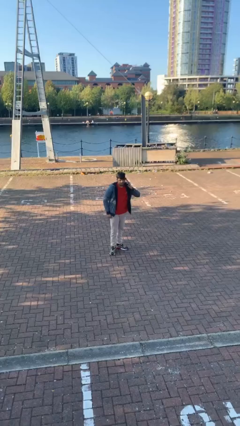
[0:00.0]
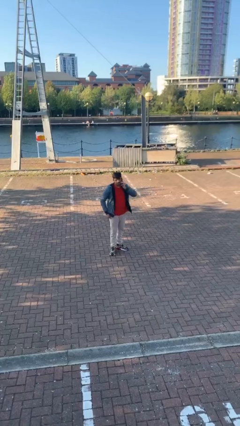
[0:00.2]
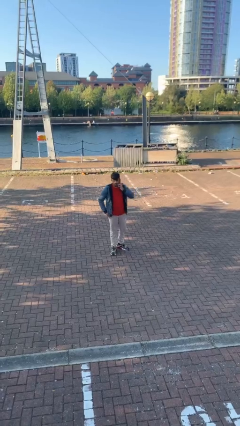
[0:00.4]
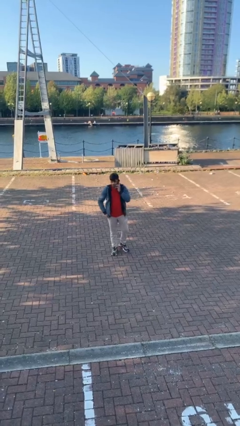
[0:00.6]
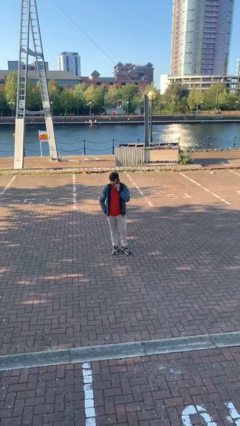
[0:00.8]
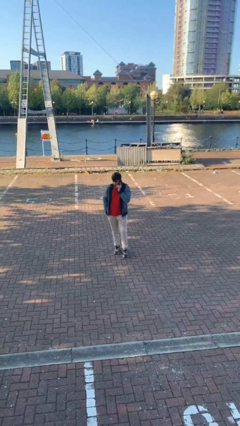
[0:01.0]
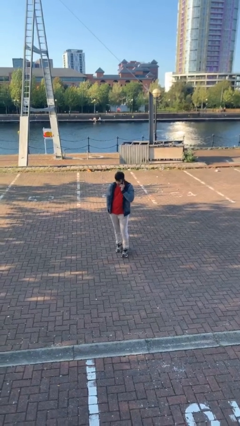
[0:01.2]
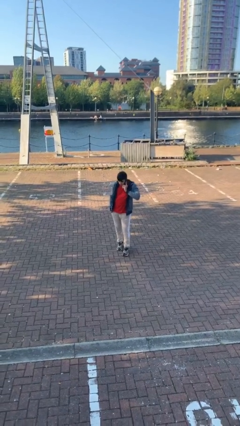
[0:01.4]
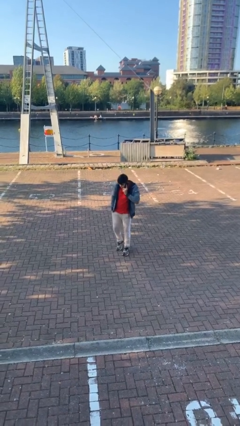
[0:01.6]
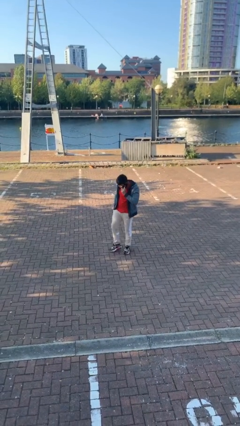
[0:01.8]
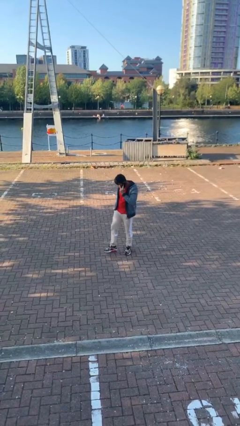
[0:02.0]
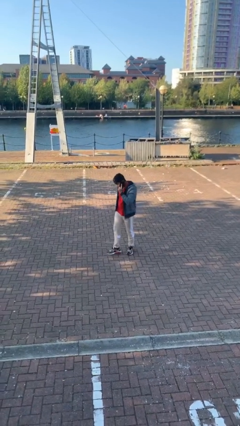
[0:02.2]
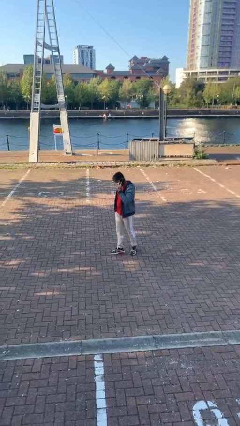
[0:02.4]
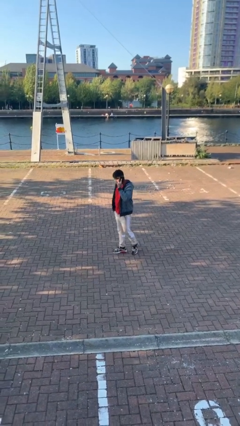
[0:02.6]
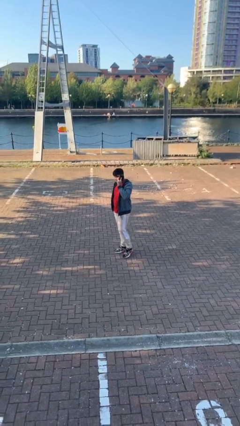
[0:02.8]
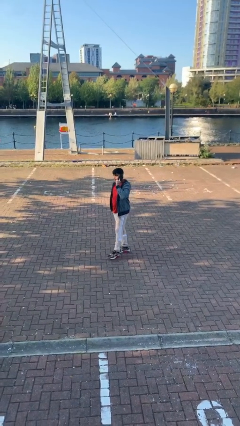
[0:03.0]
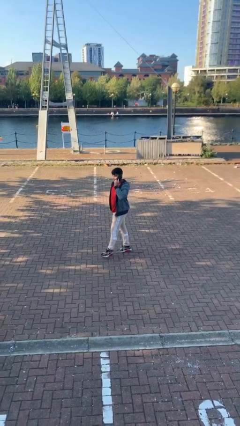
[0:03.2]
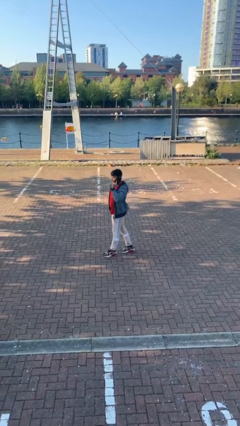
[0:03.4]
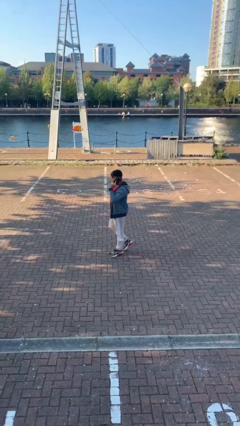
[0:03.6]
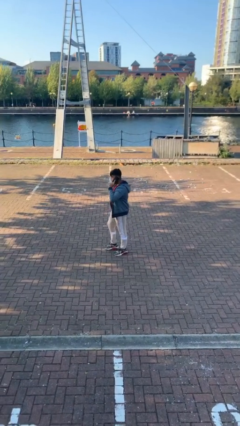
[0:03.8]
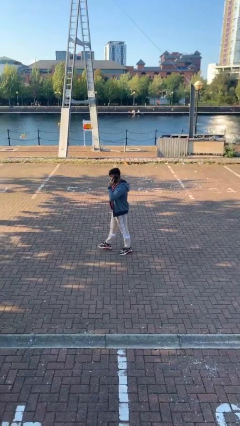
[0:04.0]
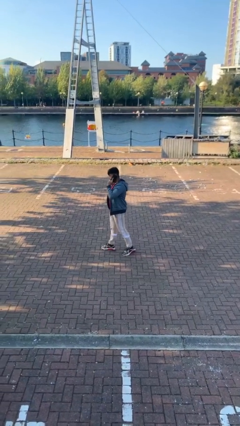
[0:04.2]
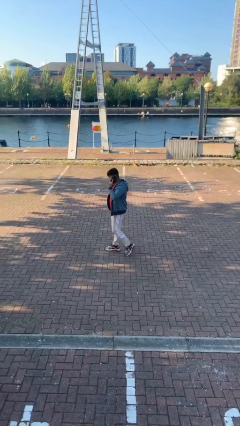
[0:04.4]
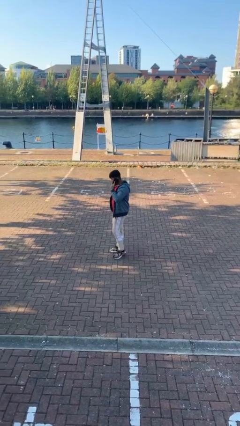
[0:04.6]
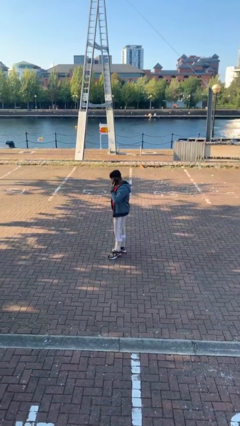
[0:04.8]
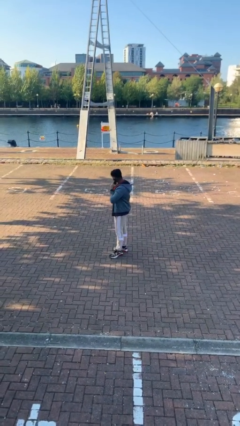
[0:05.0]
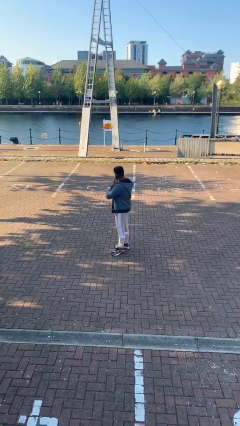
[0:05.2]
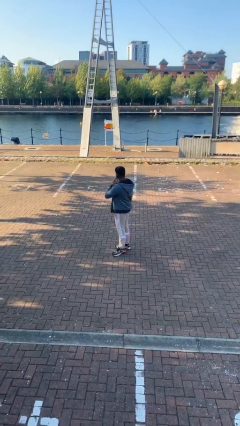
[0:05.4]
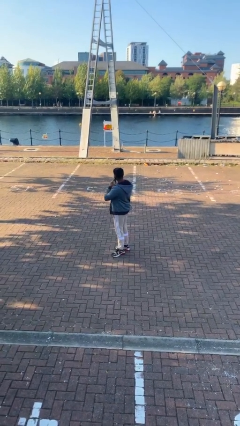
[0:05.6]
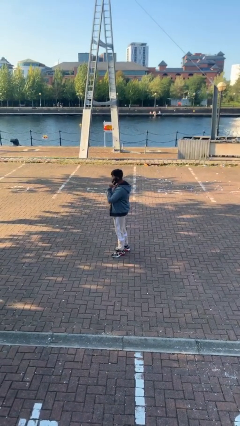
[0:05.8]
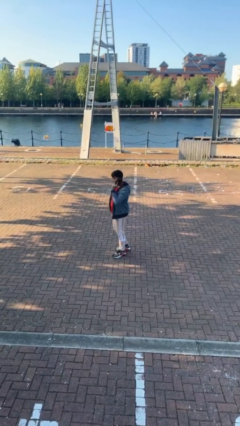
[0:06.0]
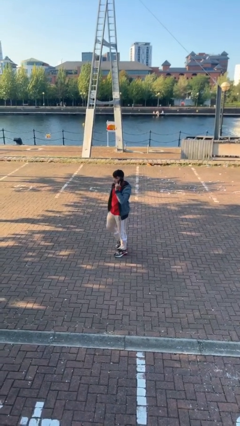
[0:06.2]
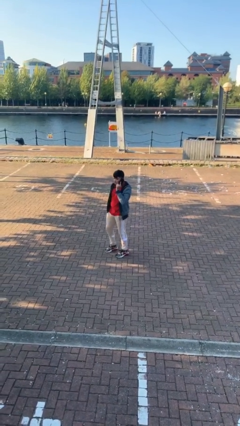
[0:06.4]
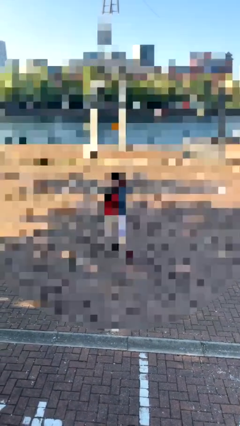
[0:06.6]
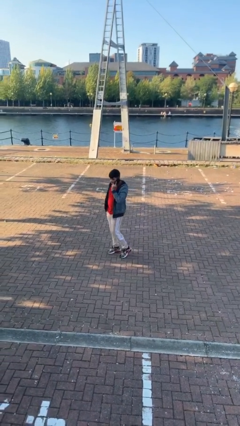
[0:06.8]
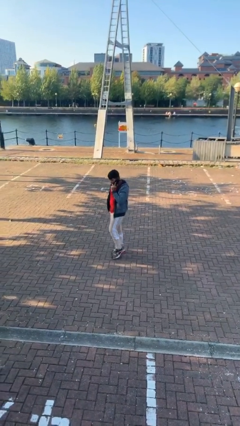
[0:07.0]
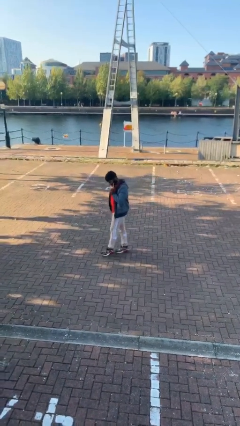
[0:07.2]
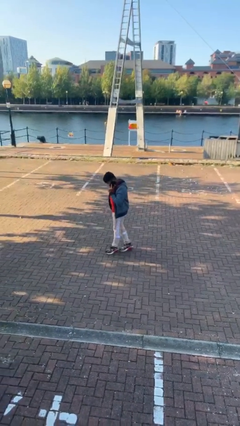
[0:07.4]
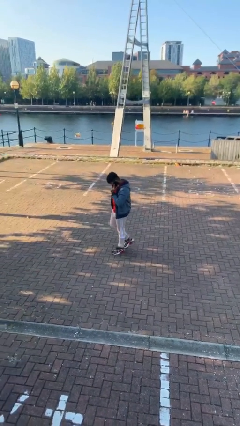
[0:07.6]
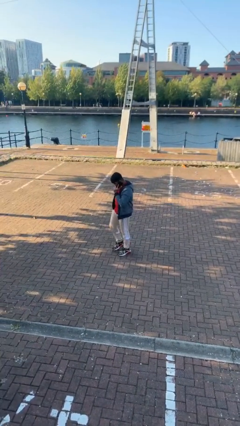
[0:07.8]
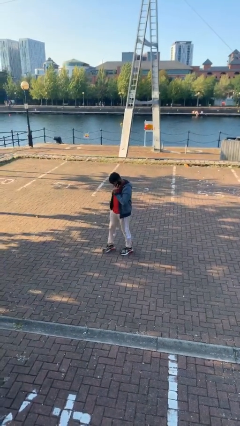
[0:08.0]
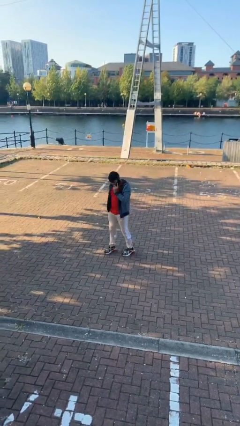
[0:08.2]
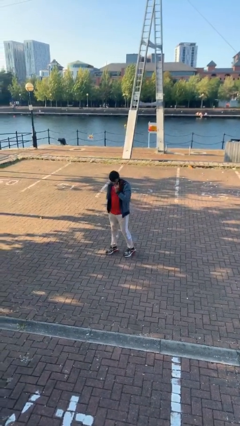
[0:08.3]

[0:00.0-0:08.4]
person talks on phone

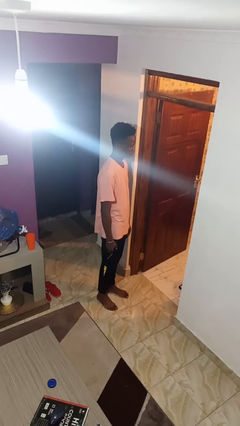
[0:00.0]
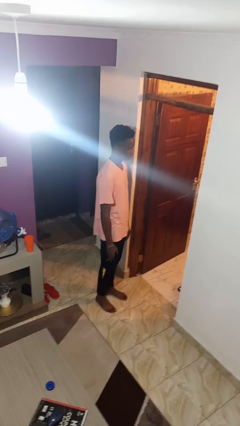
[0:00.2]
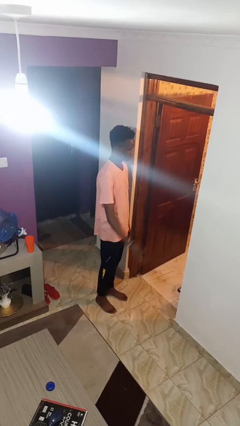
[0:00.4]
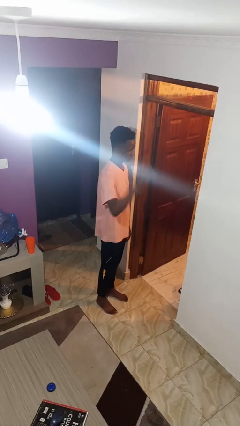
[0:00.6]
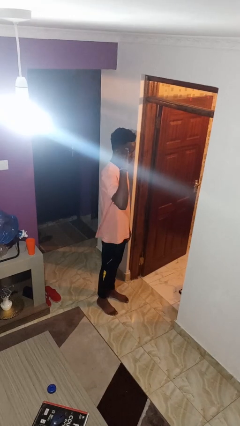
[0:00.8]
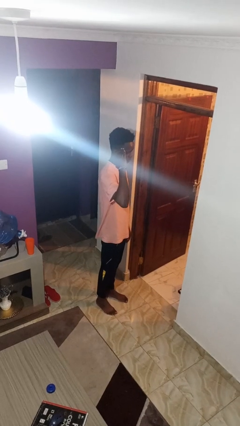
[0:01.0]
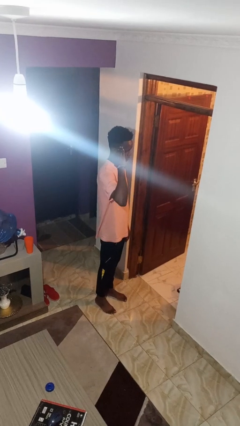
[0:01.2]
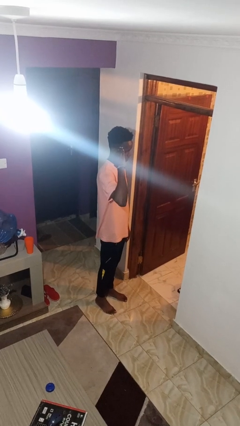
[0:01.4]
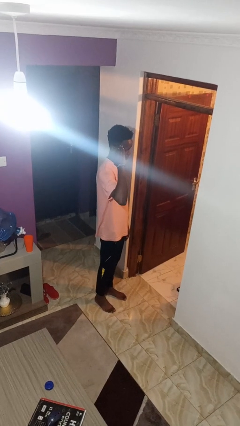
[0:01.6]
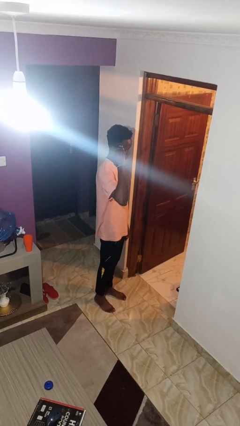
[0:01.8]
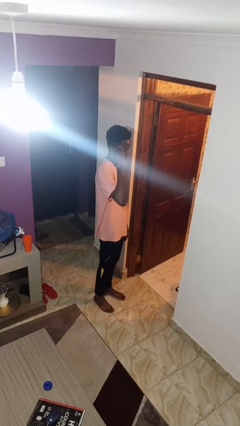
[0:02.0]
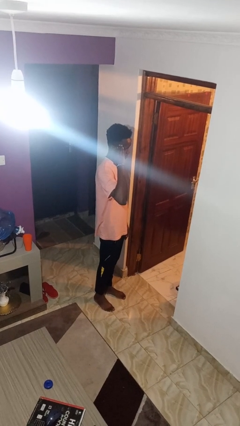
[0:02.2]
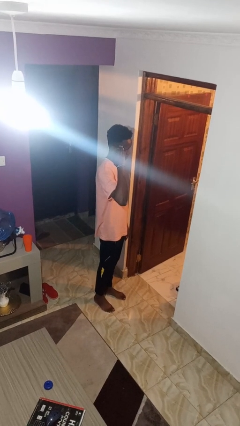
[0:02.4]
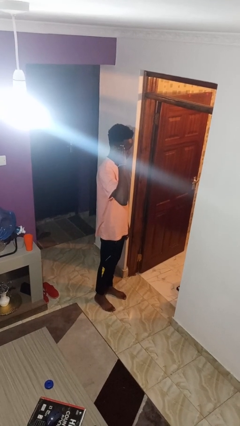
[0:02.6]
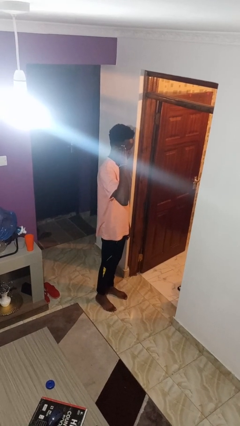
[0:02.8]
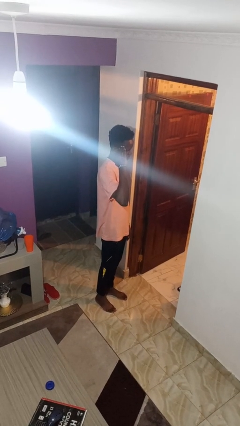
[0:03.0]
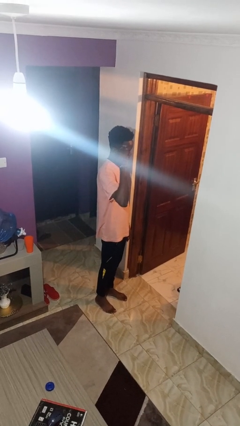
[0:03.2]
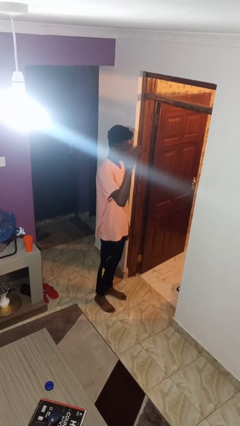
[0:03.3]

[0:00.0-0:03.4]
person salutes

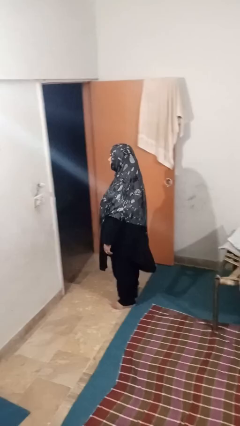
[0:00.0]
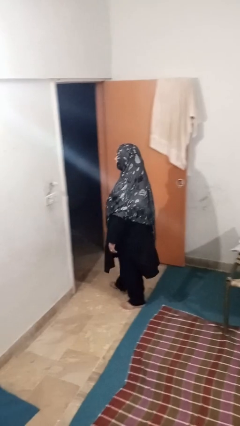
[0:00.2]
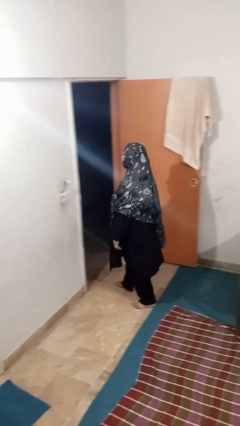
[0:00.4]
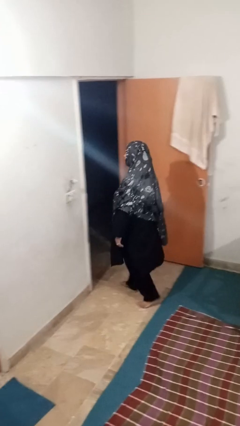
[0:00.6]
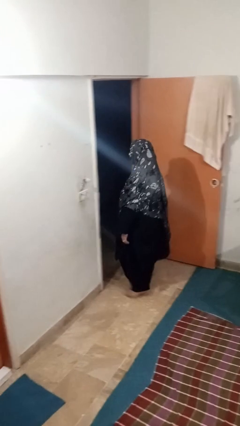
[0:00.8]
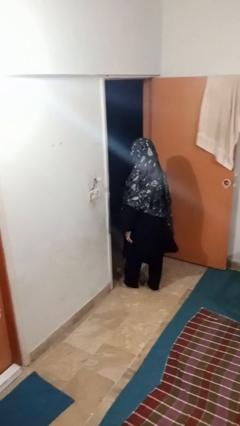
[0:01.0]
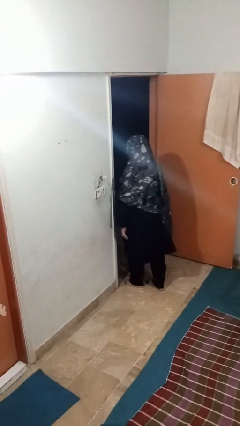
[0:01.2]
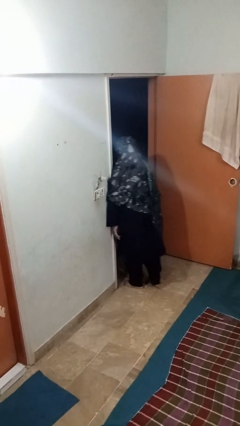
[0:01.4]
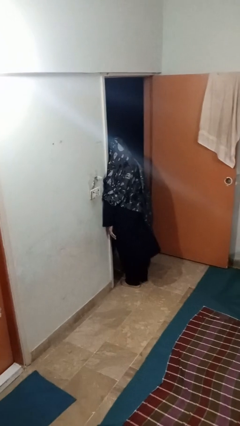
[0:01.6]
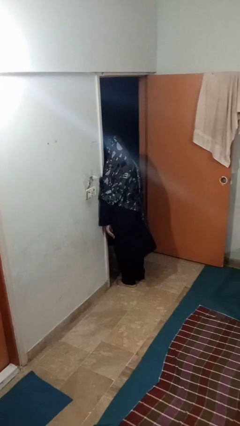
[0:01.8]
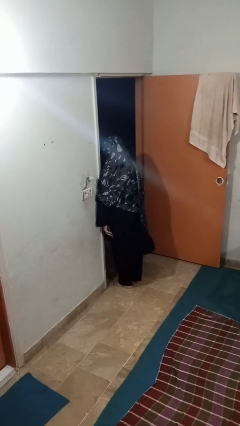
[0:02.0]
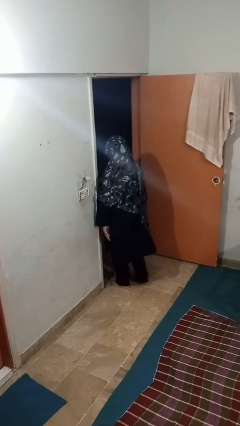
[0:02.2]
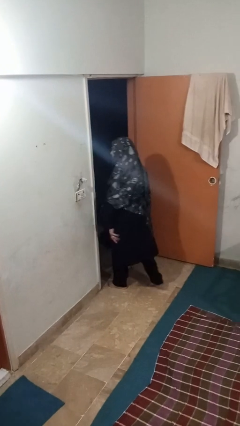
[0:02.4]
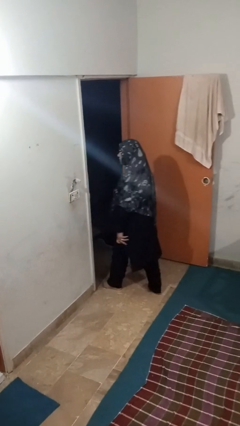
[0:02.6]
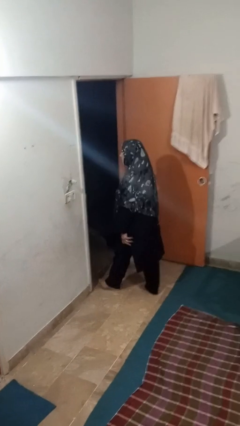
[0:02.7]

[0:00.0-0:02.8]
person bumps into wall

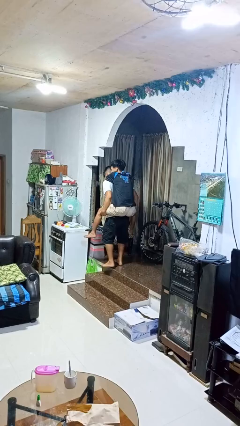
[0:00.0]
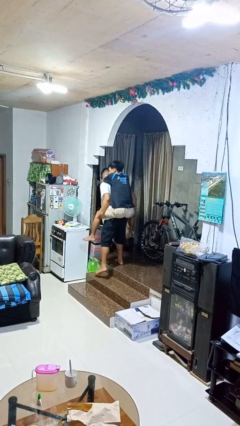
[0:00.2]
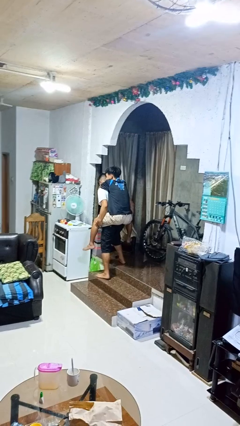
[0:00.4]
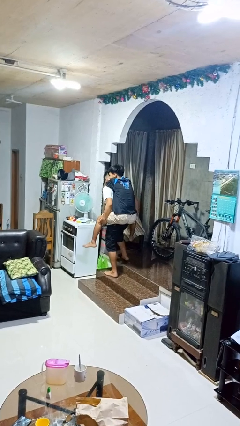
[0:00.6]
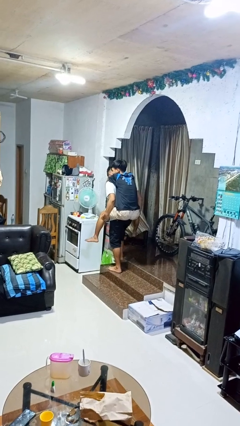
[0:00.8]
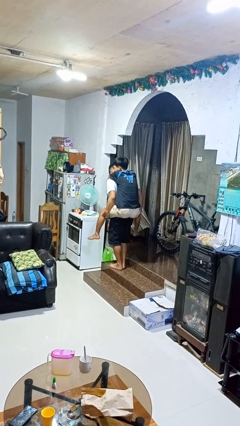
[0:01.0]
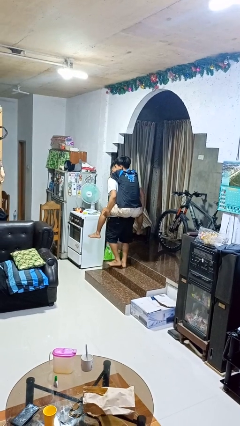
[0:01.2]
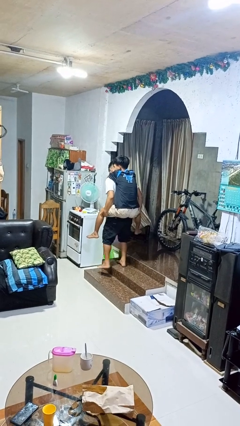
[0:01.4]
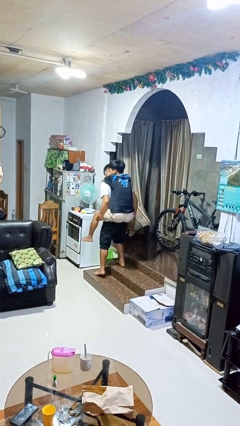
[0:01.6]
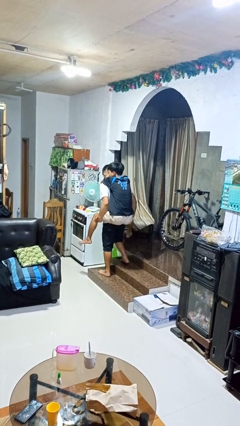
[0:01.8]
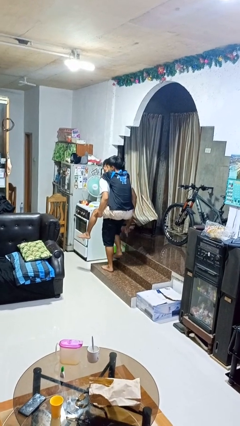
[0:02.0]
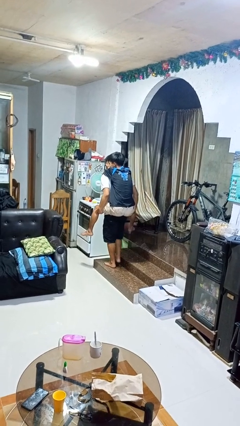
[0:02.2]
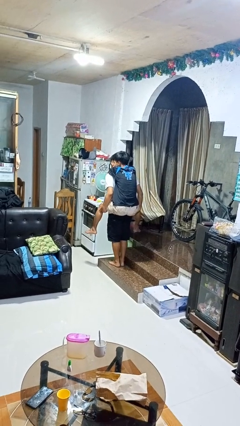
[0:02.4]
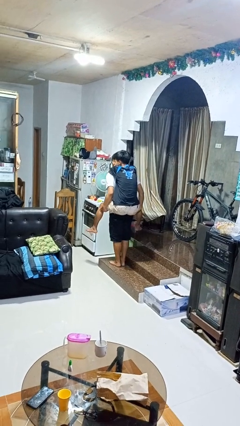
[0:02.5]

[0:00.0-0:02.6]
person carries person on back

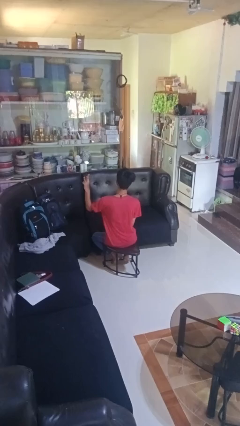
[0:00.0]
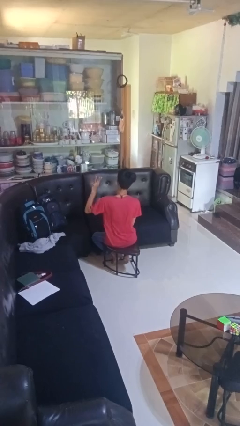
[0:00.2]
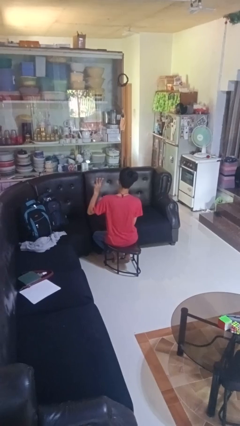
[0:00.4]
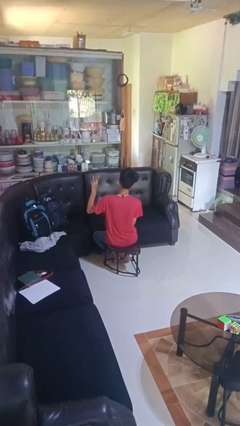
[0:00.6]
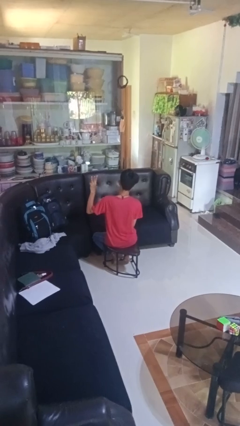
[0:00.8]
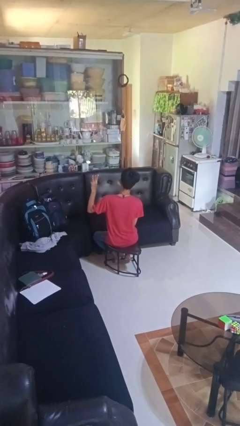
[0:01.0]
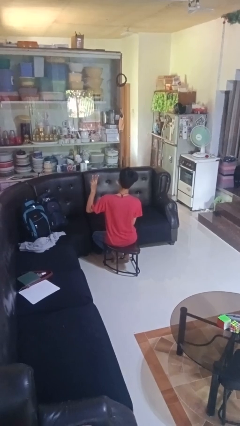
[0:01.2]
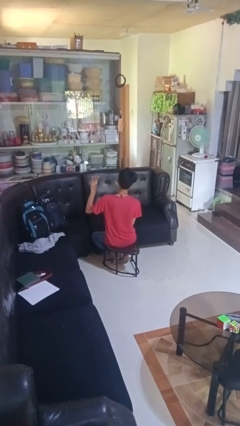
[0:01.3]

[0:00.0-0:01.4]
person gestures number three
